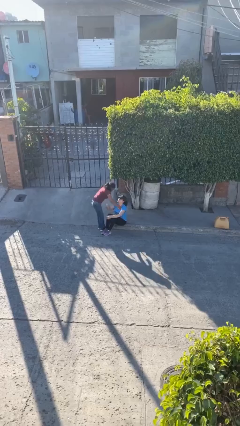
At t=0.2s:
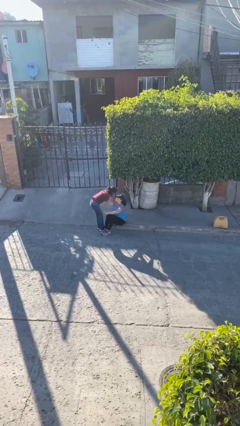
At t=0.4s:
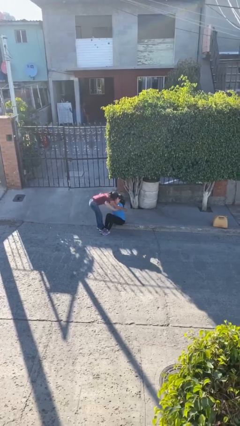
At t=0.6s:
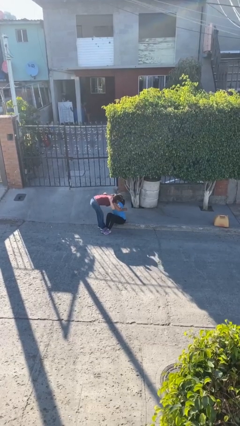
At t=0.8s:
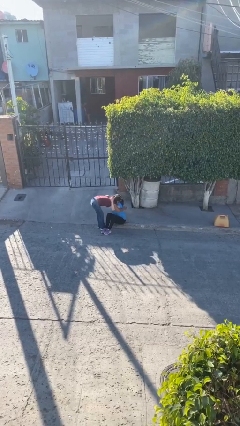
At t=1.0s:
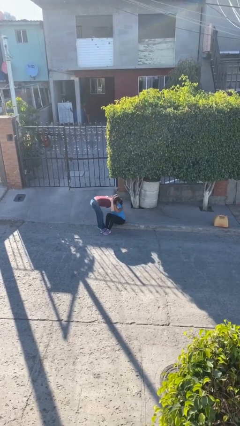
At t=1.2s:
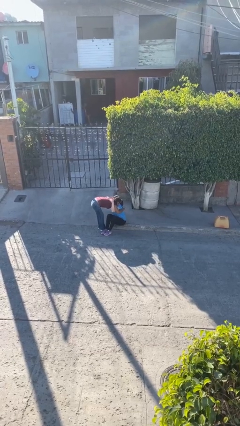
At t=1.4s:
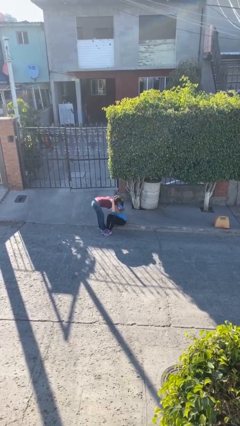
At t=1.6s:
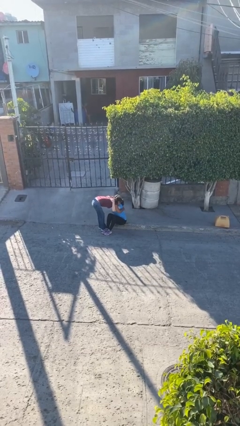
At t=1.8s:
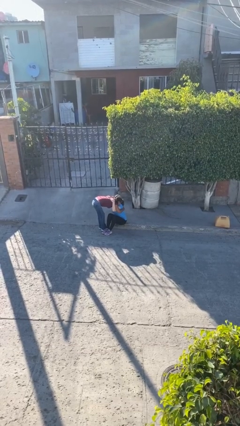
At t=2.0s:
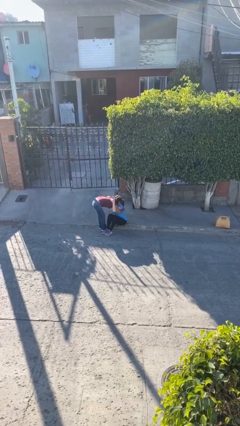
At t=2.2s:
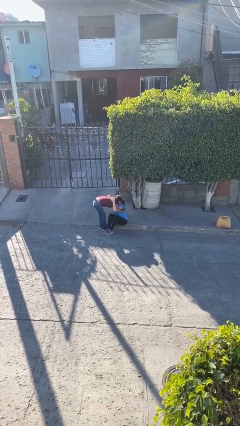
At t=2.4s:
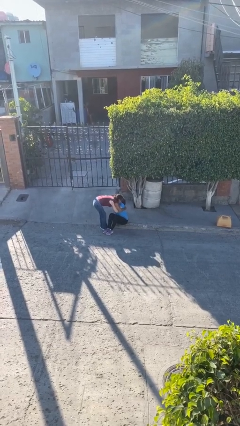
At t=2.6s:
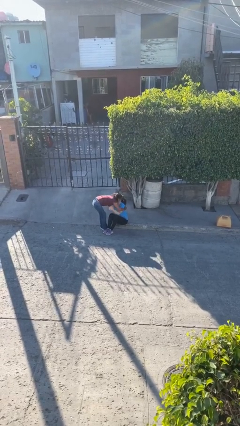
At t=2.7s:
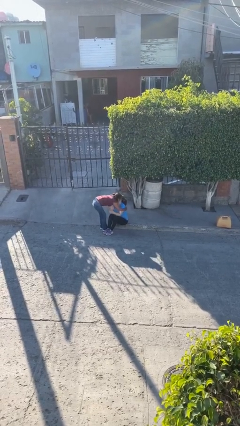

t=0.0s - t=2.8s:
person embraces person

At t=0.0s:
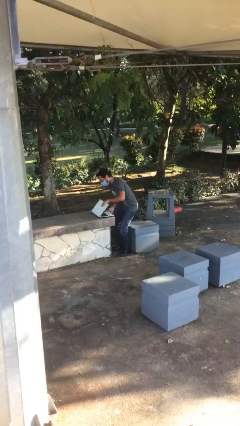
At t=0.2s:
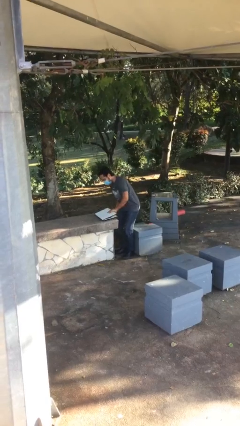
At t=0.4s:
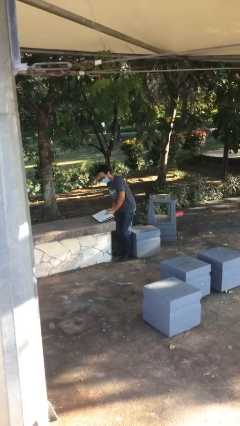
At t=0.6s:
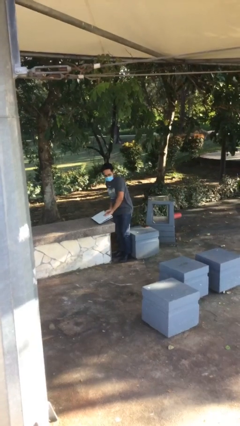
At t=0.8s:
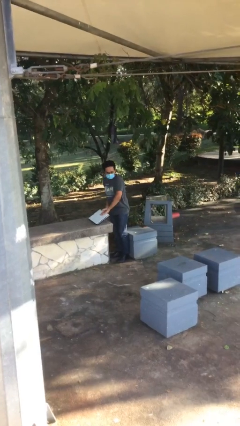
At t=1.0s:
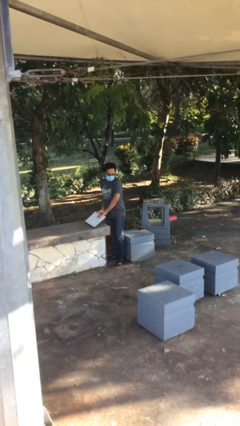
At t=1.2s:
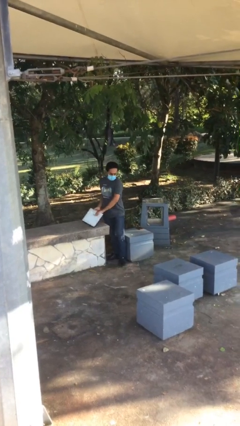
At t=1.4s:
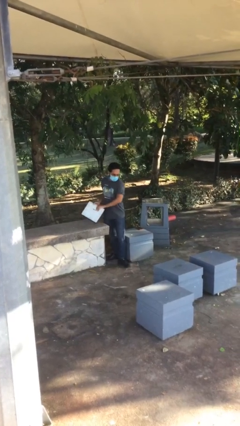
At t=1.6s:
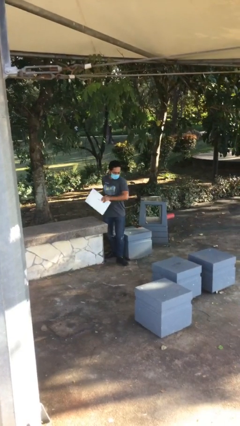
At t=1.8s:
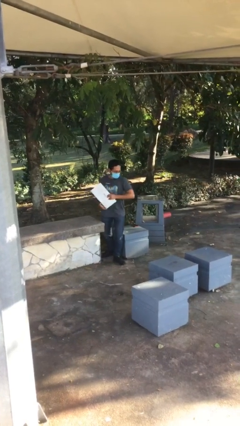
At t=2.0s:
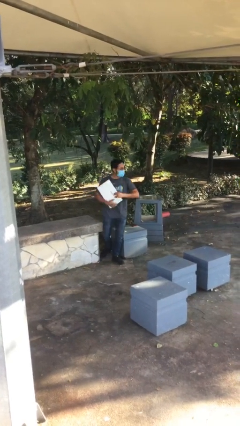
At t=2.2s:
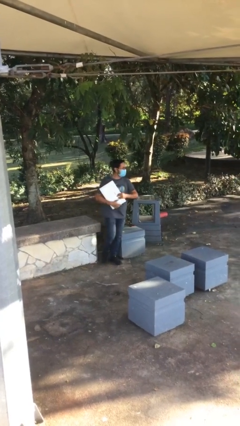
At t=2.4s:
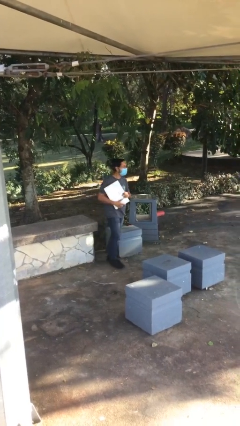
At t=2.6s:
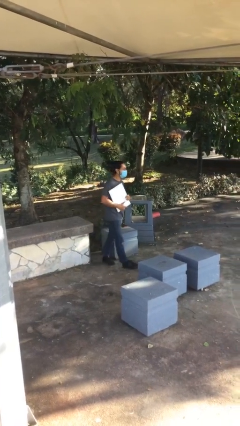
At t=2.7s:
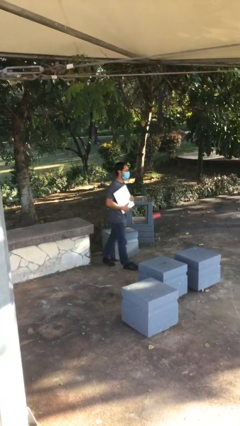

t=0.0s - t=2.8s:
person stands up

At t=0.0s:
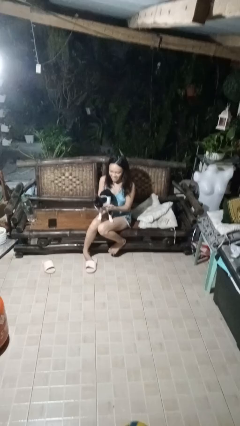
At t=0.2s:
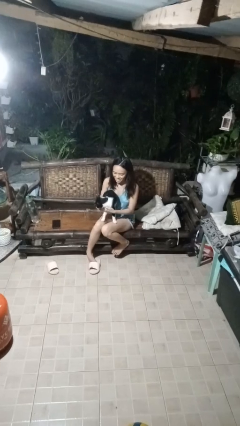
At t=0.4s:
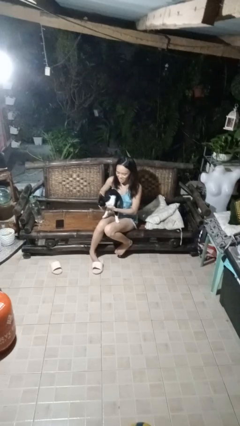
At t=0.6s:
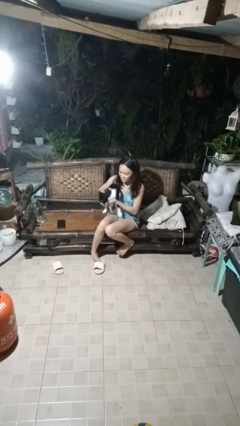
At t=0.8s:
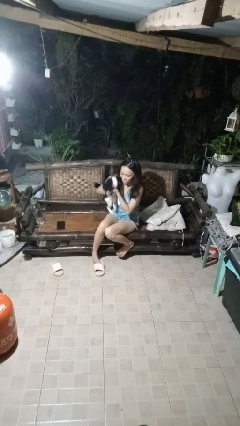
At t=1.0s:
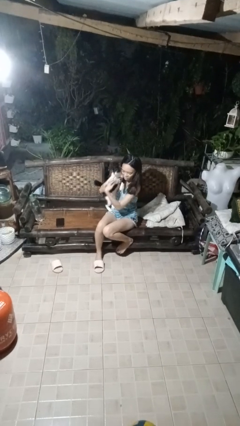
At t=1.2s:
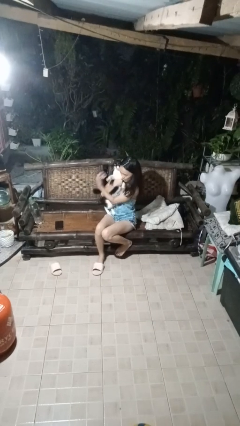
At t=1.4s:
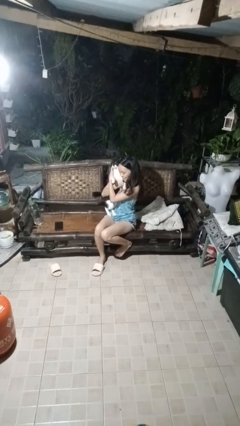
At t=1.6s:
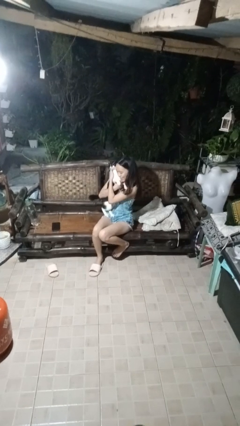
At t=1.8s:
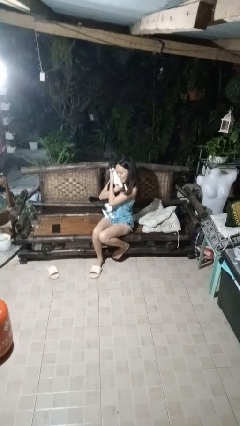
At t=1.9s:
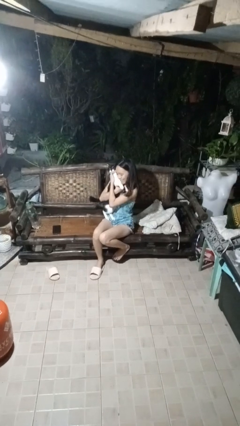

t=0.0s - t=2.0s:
person hugs cat

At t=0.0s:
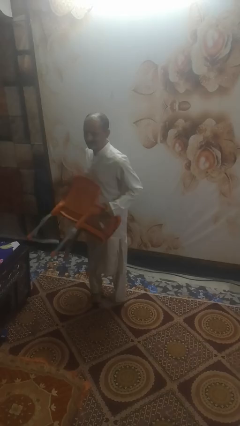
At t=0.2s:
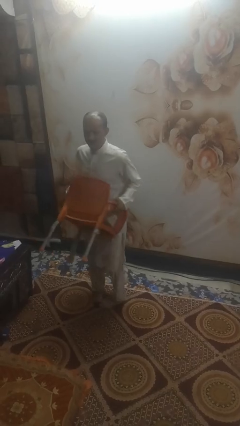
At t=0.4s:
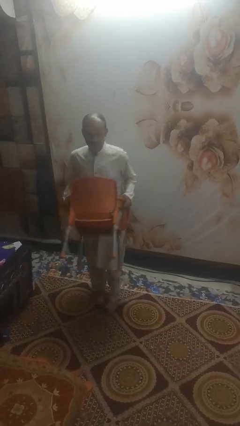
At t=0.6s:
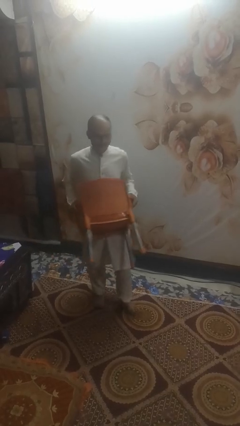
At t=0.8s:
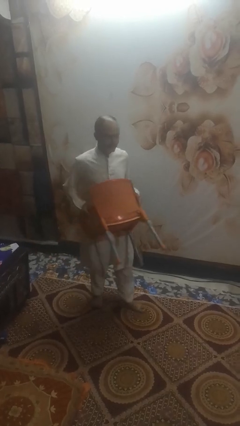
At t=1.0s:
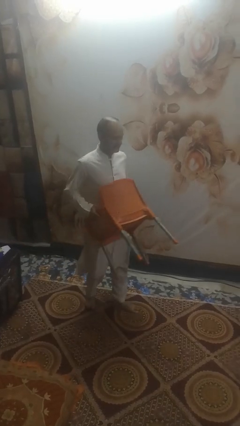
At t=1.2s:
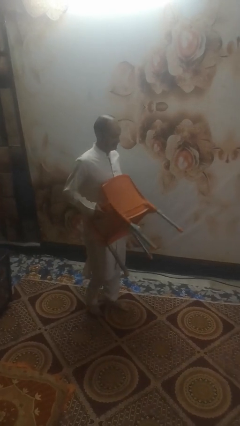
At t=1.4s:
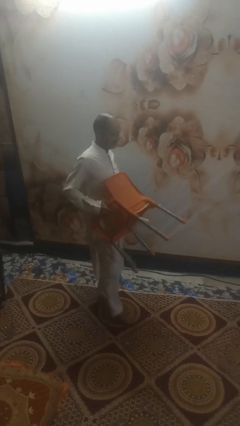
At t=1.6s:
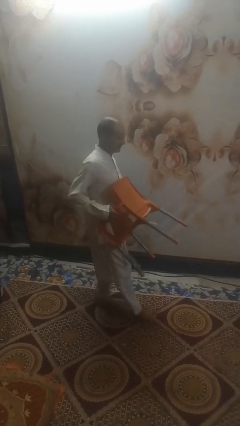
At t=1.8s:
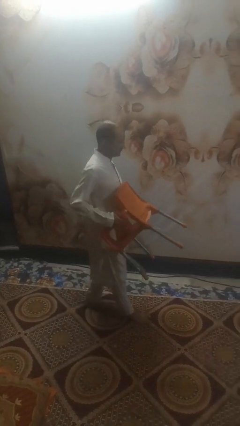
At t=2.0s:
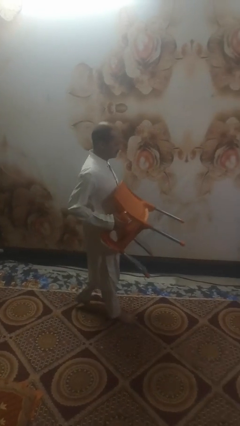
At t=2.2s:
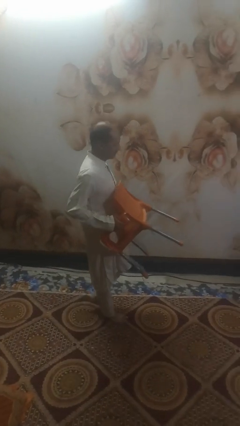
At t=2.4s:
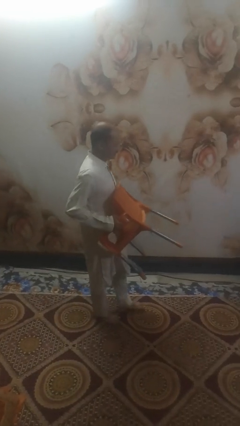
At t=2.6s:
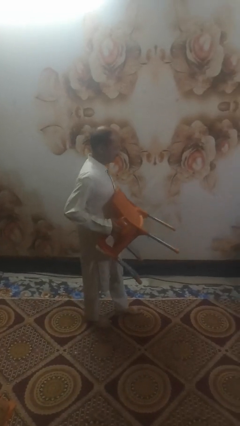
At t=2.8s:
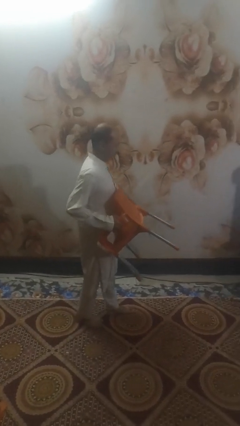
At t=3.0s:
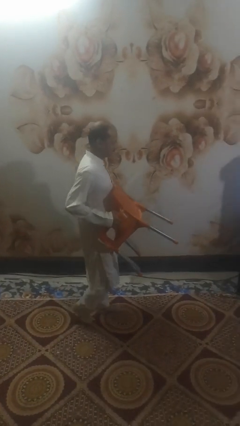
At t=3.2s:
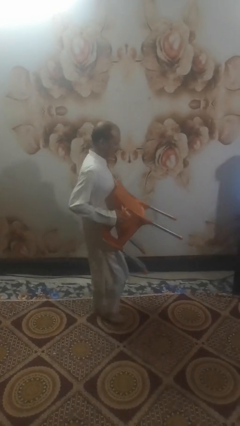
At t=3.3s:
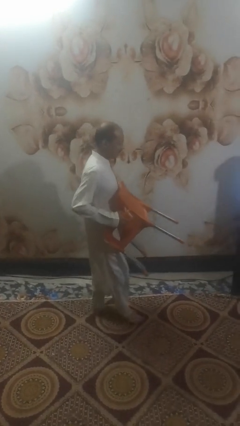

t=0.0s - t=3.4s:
person carries furniture

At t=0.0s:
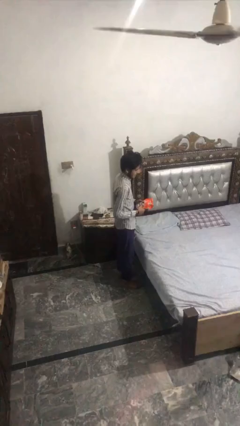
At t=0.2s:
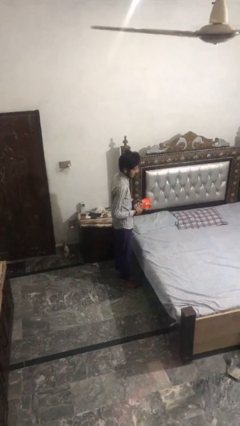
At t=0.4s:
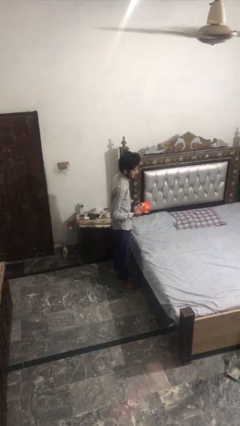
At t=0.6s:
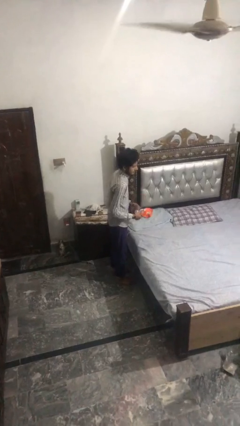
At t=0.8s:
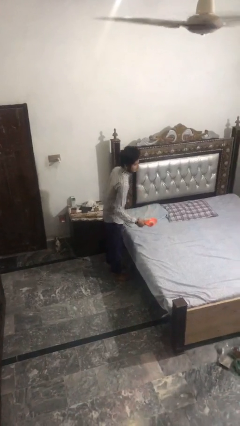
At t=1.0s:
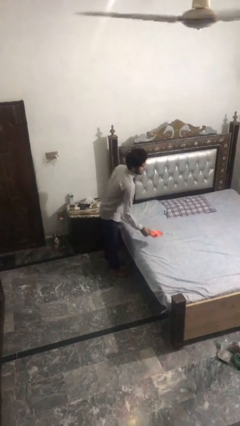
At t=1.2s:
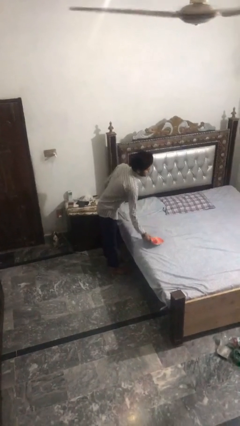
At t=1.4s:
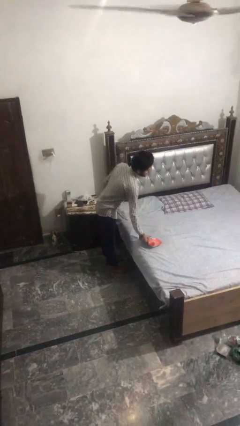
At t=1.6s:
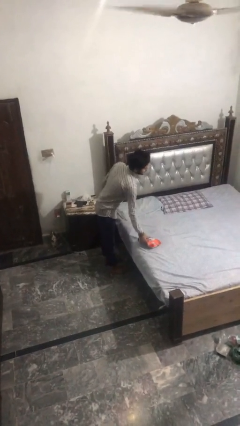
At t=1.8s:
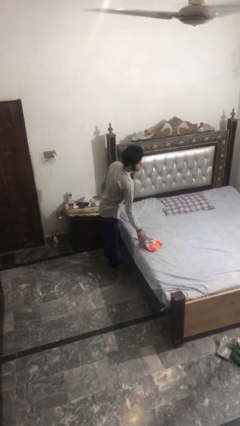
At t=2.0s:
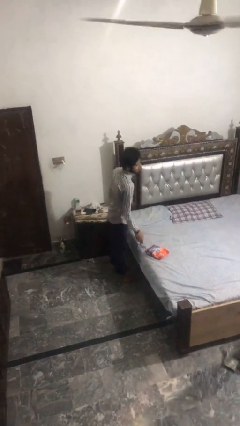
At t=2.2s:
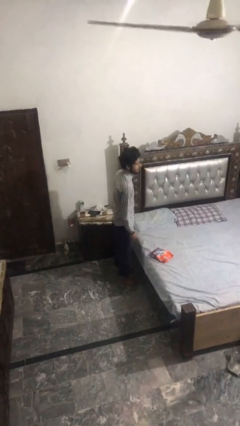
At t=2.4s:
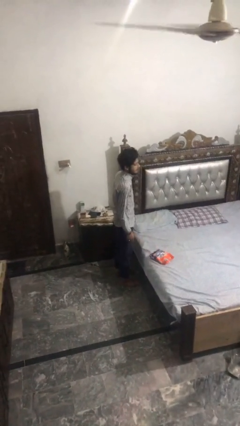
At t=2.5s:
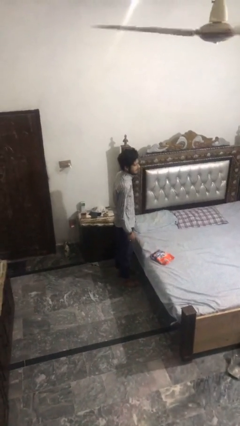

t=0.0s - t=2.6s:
person puts down object on bed

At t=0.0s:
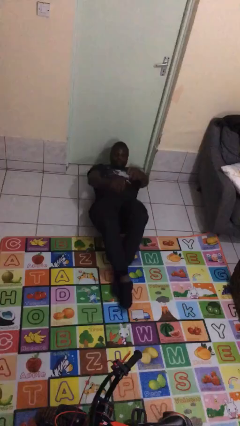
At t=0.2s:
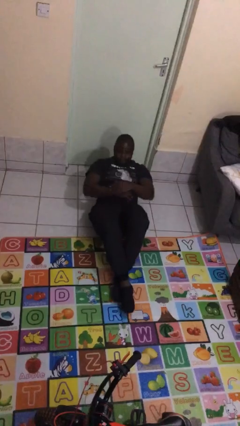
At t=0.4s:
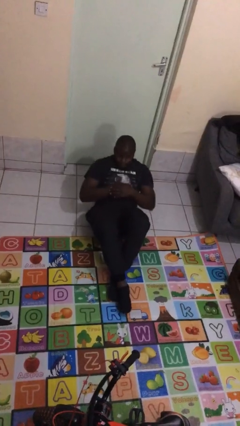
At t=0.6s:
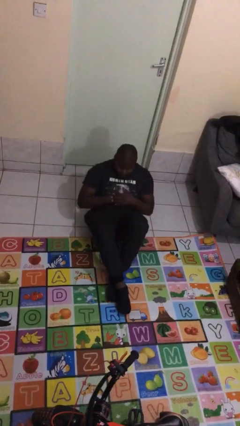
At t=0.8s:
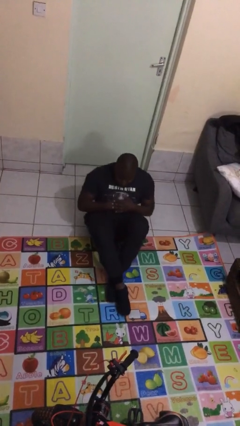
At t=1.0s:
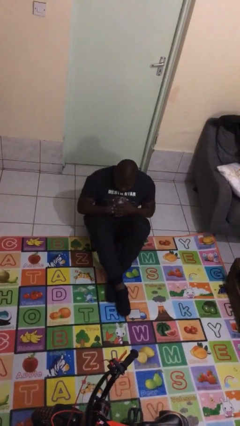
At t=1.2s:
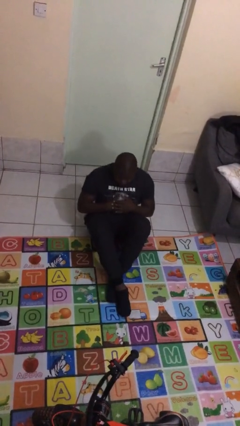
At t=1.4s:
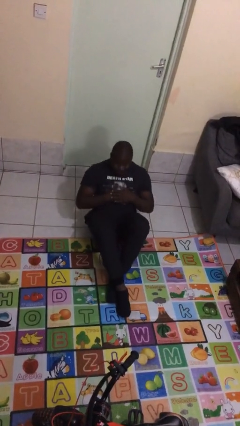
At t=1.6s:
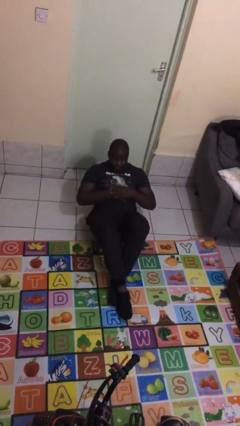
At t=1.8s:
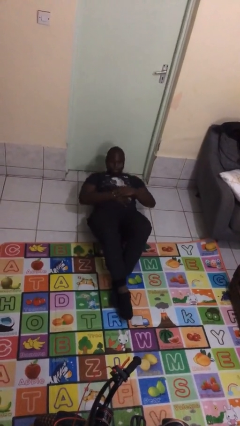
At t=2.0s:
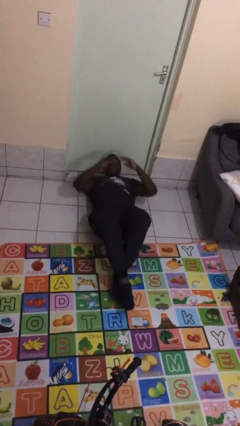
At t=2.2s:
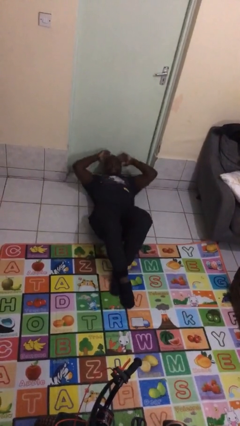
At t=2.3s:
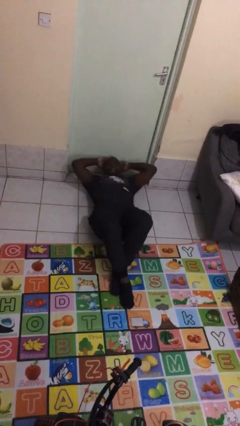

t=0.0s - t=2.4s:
person exercises with situp

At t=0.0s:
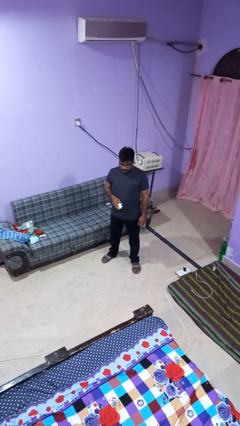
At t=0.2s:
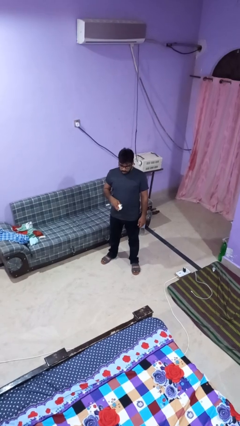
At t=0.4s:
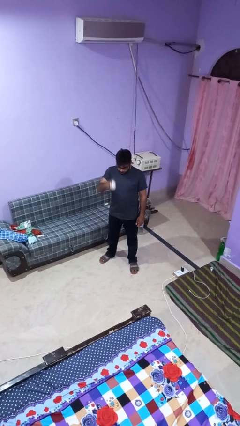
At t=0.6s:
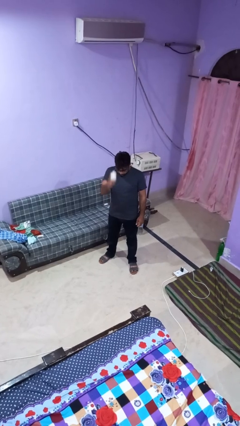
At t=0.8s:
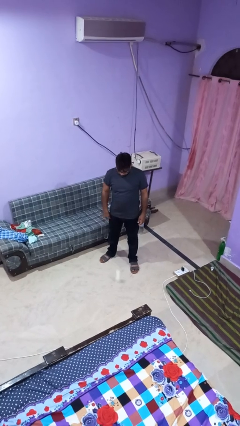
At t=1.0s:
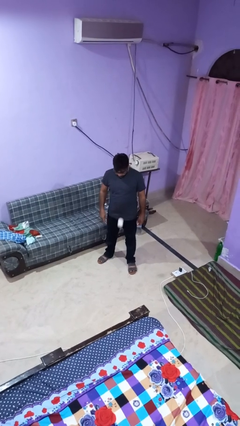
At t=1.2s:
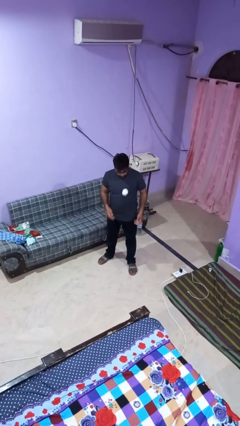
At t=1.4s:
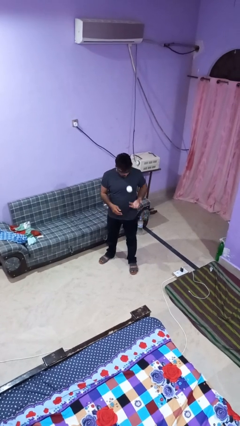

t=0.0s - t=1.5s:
person bounces ball on floor
